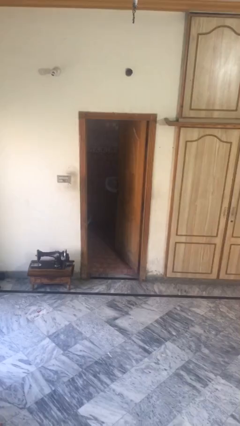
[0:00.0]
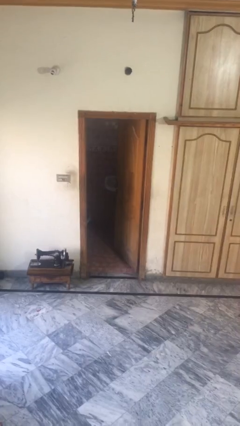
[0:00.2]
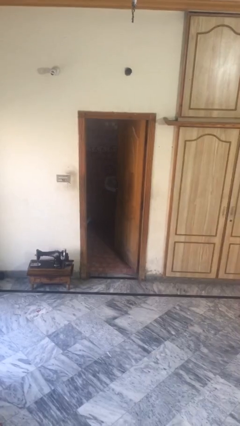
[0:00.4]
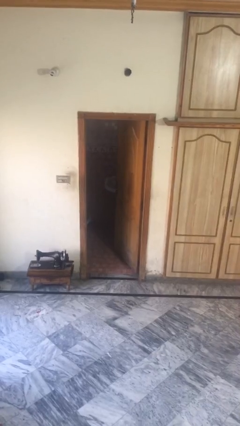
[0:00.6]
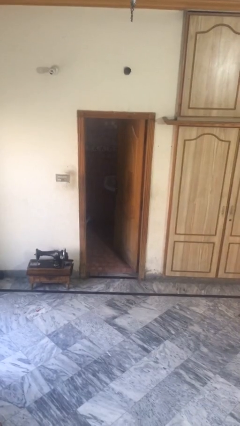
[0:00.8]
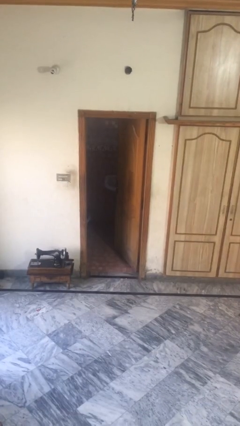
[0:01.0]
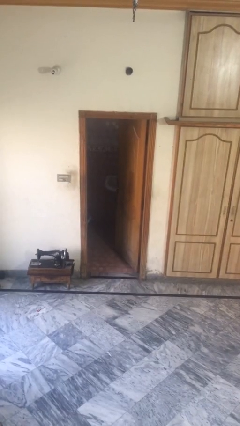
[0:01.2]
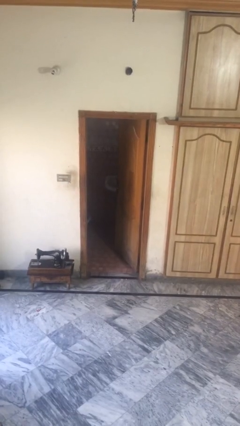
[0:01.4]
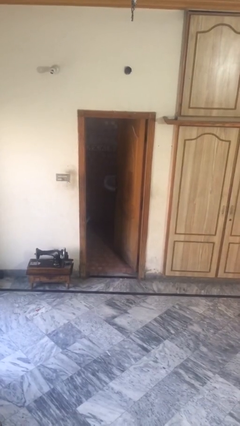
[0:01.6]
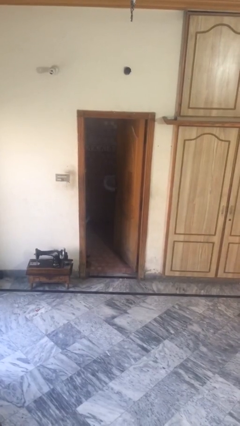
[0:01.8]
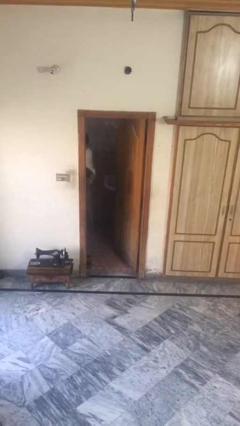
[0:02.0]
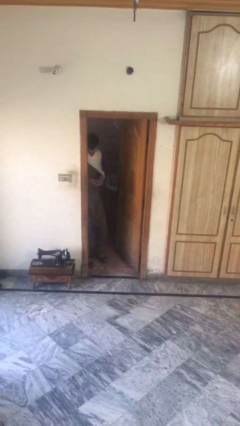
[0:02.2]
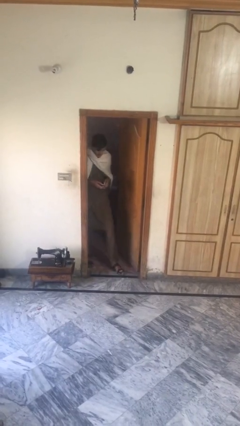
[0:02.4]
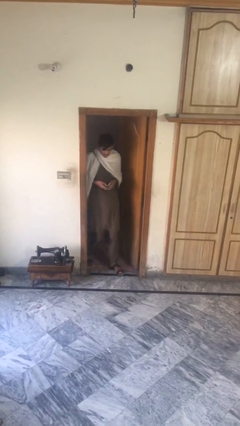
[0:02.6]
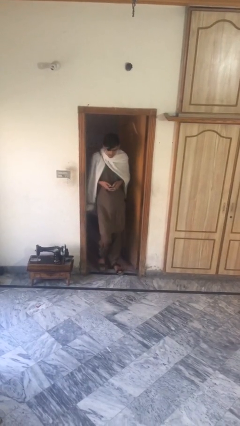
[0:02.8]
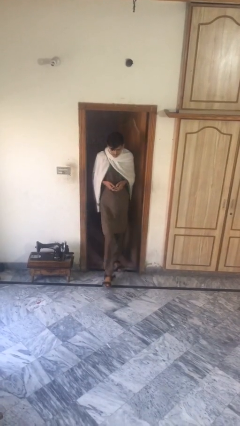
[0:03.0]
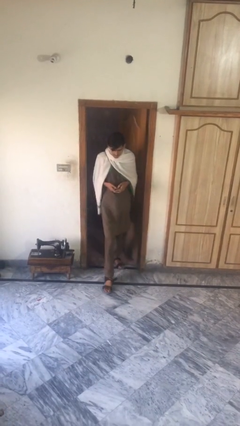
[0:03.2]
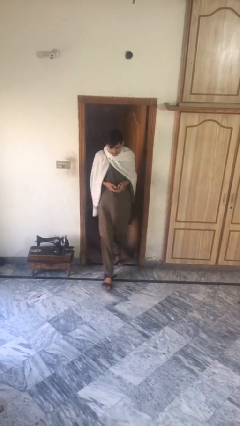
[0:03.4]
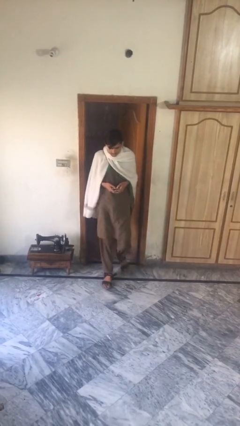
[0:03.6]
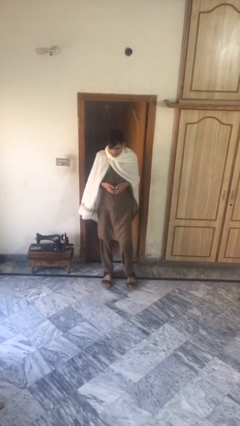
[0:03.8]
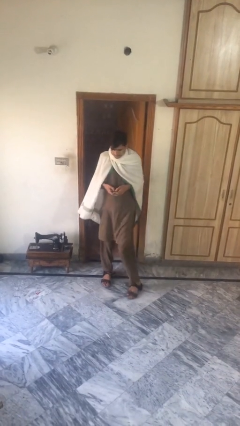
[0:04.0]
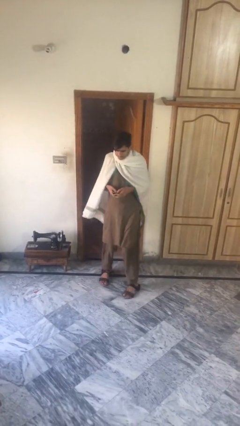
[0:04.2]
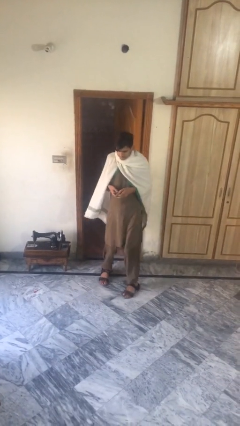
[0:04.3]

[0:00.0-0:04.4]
person enters scene through structure

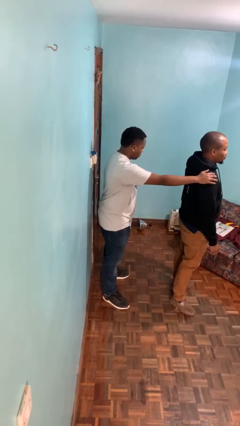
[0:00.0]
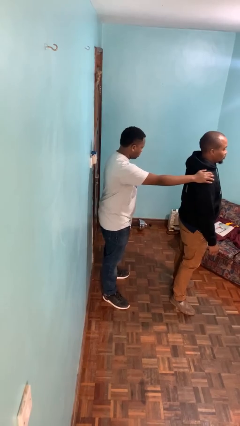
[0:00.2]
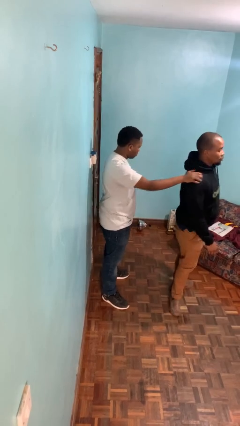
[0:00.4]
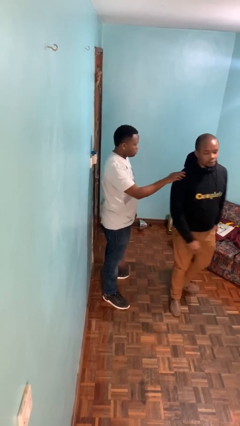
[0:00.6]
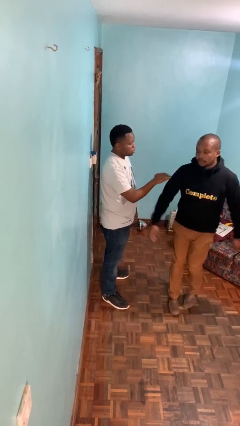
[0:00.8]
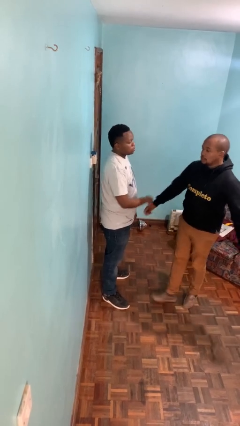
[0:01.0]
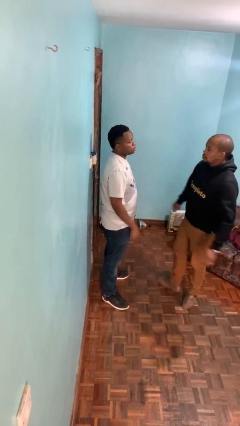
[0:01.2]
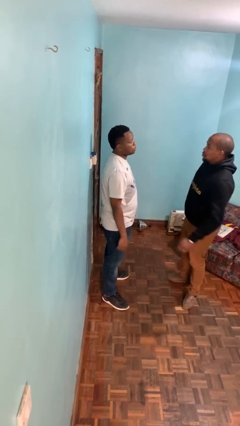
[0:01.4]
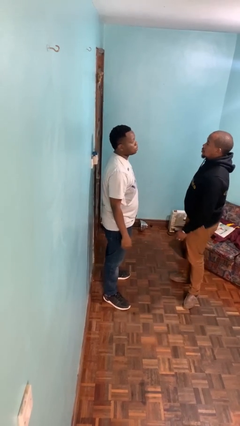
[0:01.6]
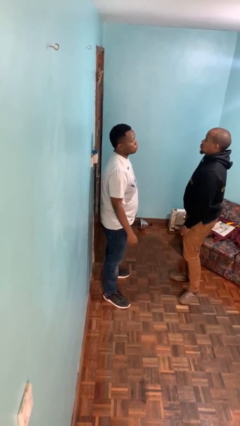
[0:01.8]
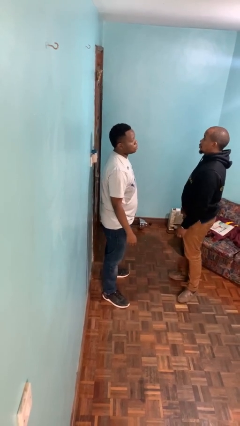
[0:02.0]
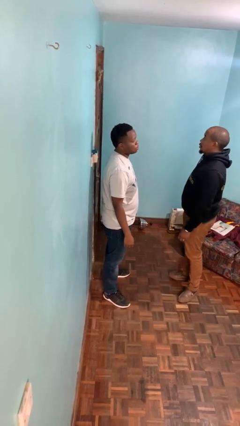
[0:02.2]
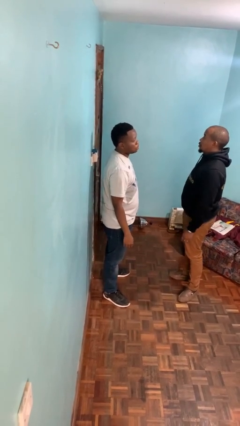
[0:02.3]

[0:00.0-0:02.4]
person spins person around

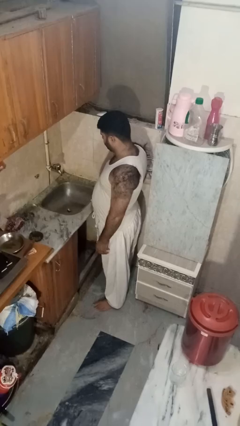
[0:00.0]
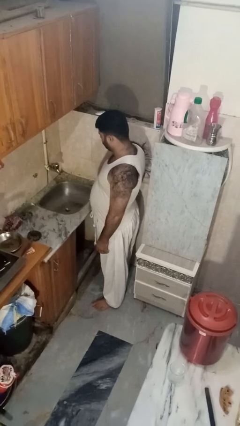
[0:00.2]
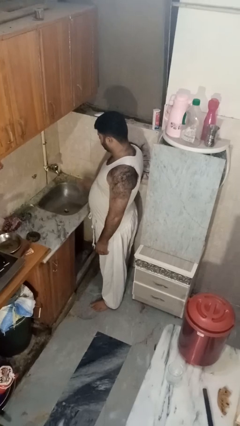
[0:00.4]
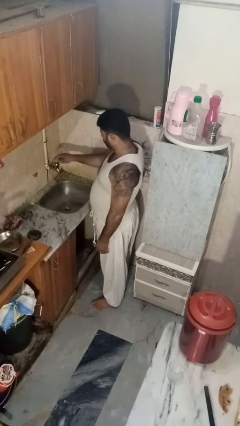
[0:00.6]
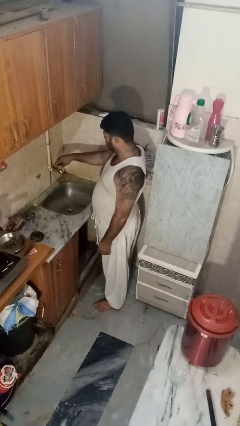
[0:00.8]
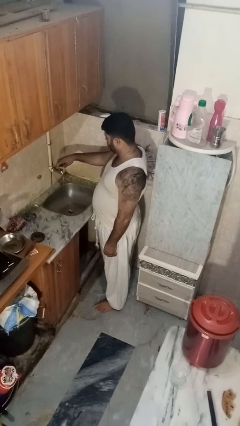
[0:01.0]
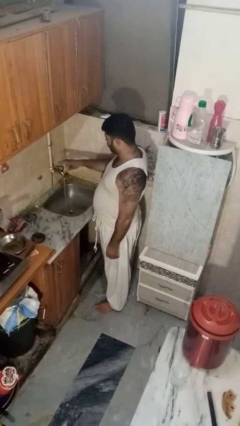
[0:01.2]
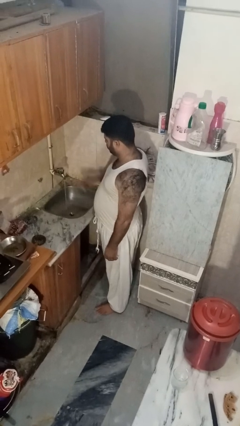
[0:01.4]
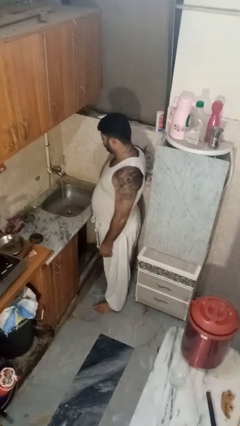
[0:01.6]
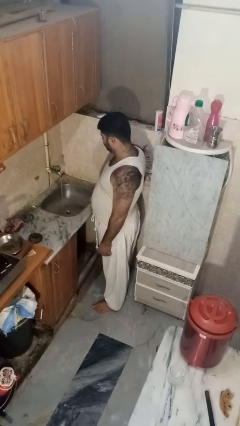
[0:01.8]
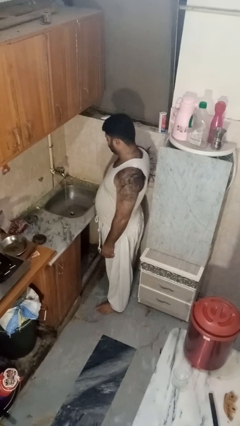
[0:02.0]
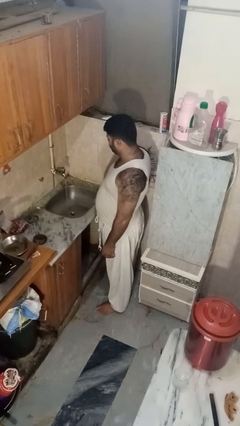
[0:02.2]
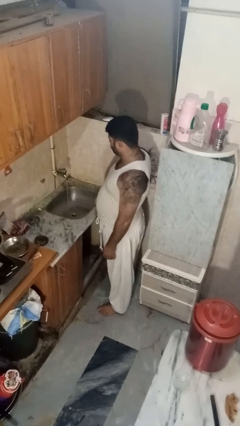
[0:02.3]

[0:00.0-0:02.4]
person turns on faucet

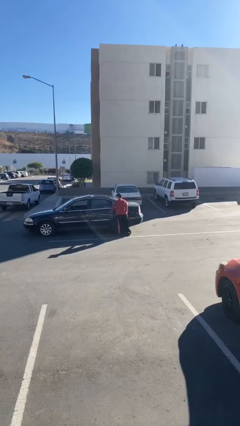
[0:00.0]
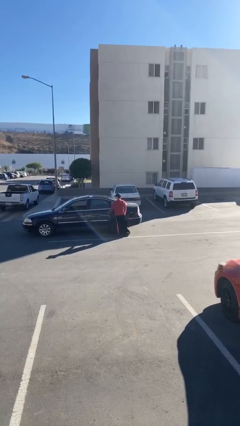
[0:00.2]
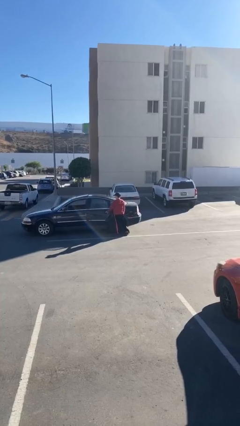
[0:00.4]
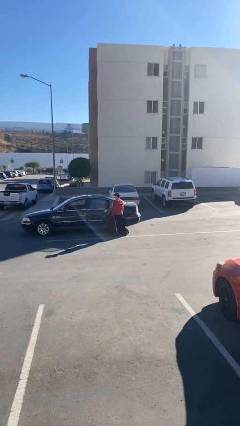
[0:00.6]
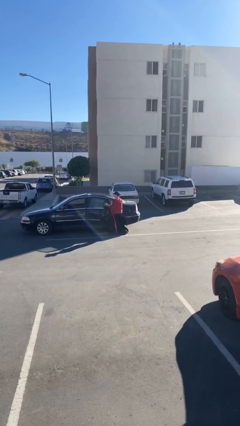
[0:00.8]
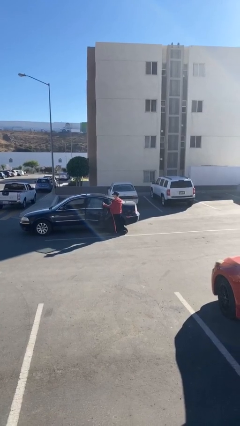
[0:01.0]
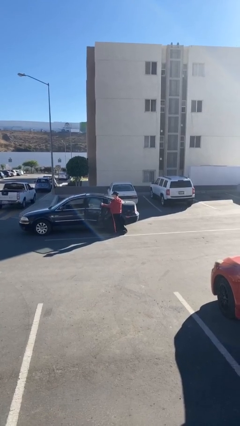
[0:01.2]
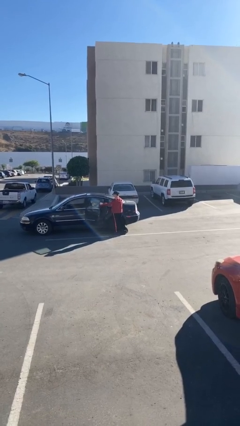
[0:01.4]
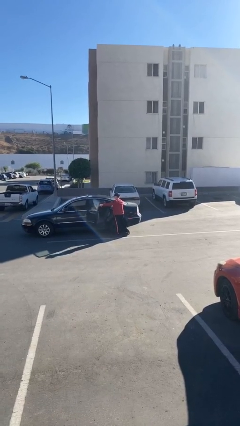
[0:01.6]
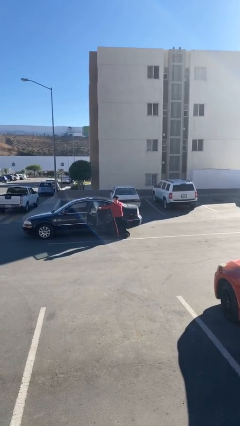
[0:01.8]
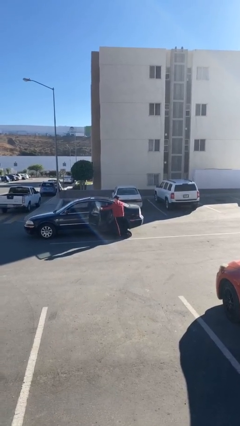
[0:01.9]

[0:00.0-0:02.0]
person opens car door

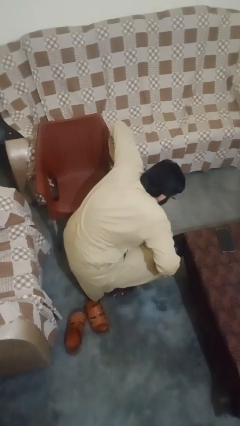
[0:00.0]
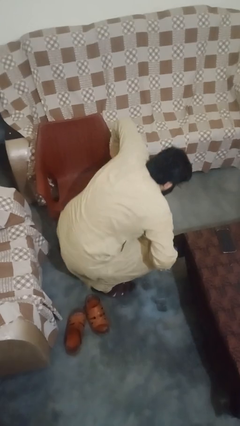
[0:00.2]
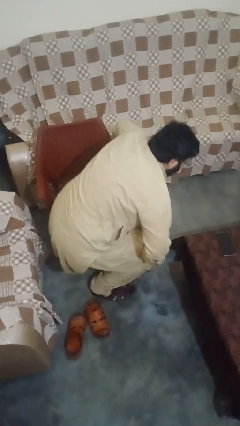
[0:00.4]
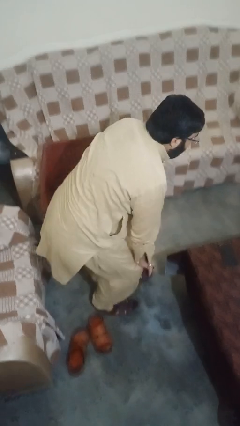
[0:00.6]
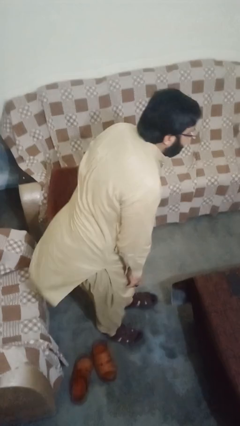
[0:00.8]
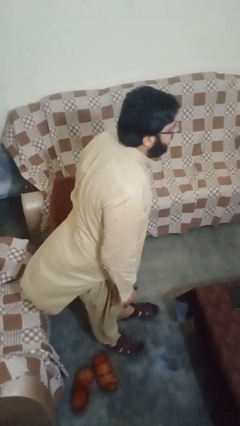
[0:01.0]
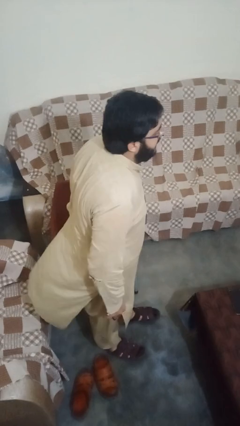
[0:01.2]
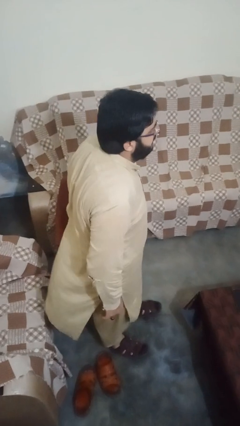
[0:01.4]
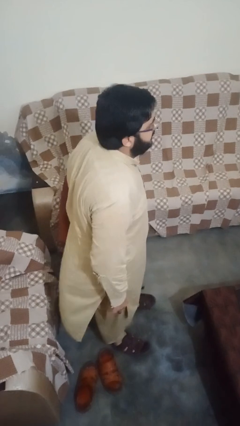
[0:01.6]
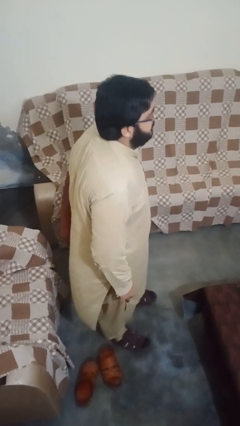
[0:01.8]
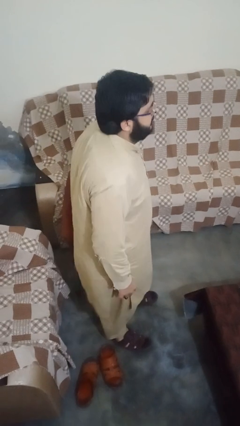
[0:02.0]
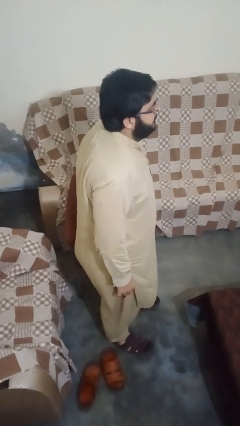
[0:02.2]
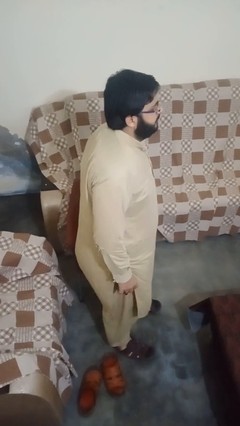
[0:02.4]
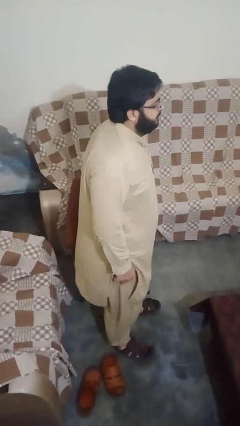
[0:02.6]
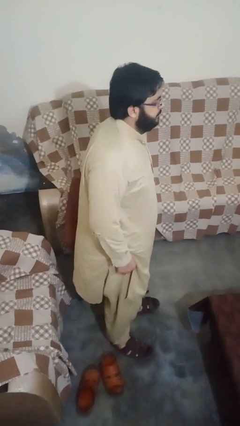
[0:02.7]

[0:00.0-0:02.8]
person stands up from floor

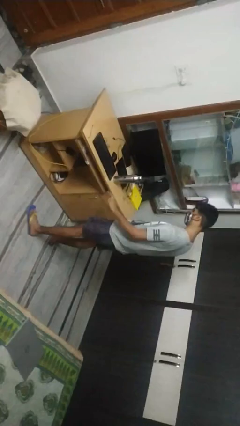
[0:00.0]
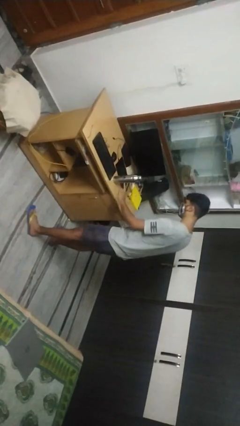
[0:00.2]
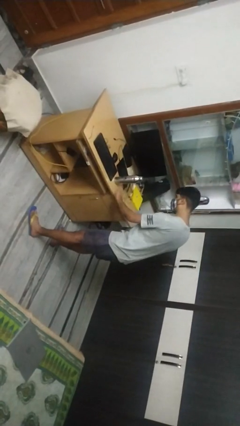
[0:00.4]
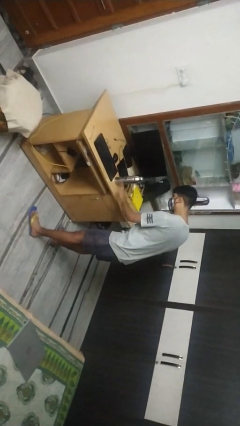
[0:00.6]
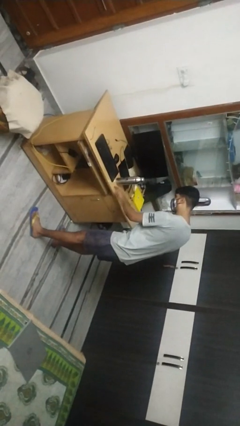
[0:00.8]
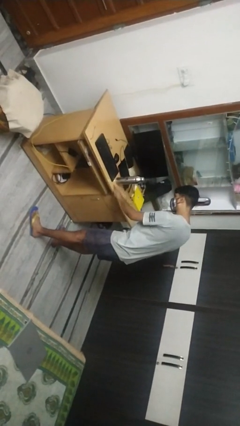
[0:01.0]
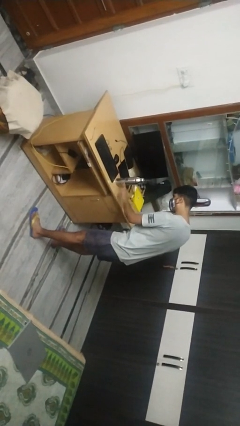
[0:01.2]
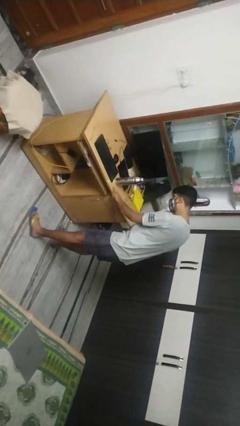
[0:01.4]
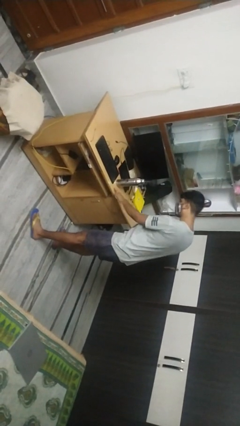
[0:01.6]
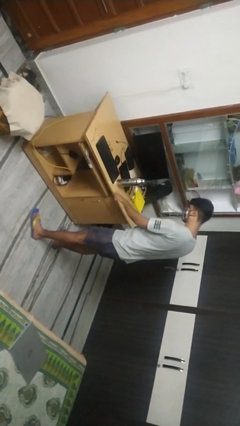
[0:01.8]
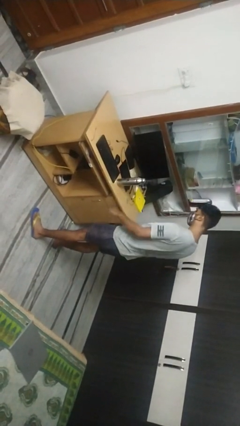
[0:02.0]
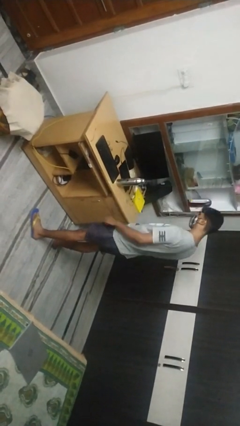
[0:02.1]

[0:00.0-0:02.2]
person taps object with finger

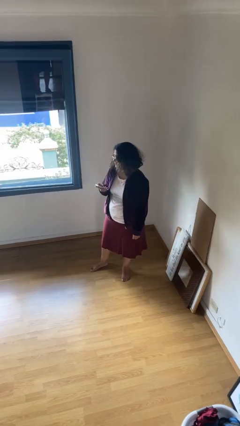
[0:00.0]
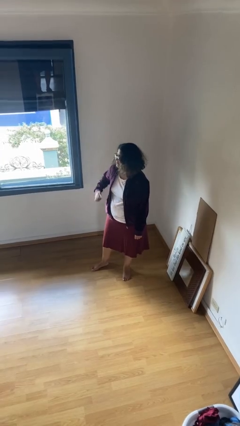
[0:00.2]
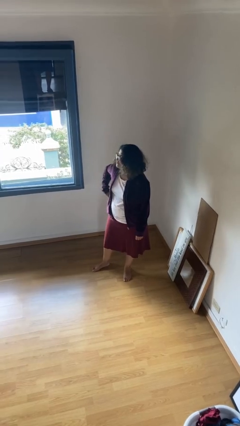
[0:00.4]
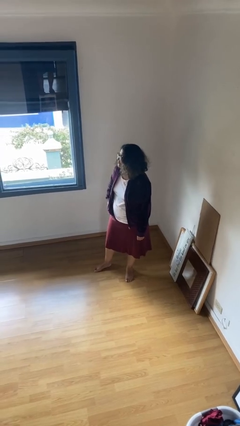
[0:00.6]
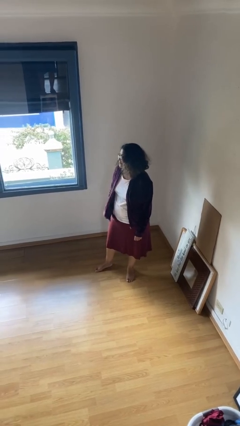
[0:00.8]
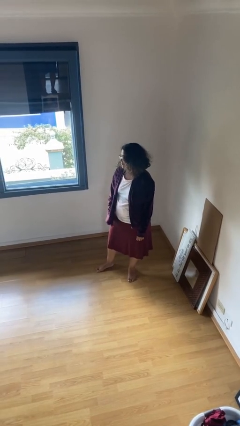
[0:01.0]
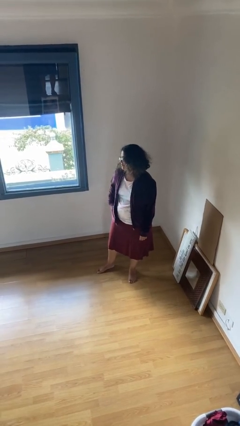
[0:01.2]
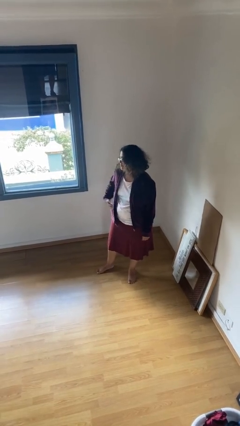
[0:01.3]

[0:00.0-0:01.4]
person puts phone into pocket
